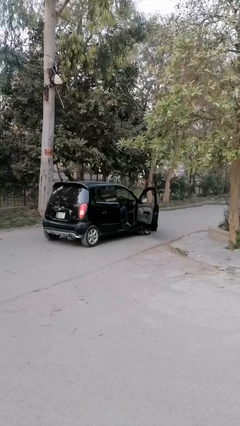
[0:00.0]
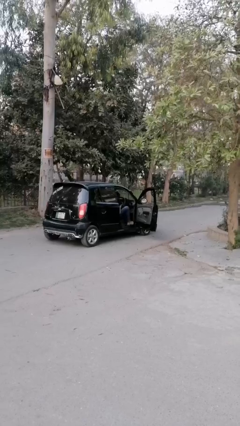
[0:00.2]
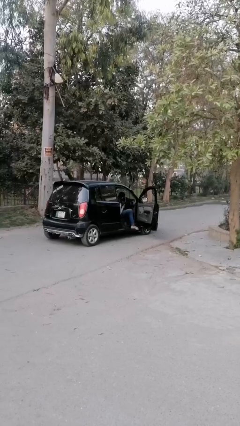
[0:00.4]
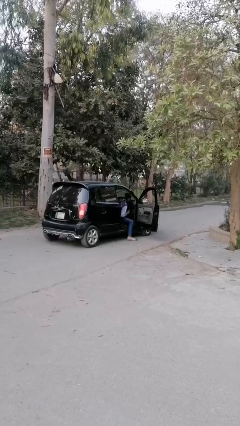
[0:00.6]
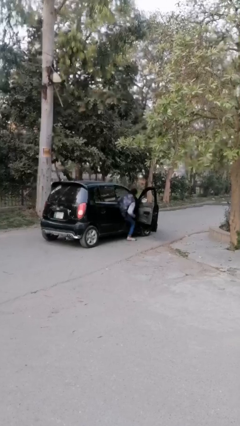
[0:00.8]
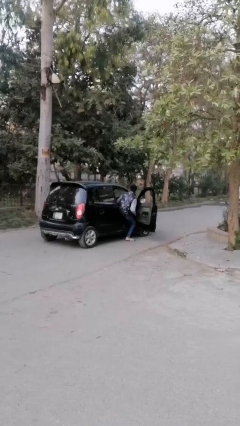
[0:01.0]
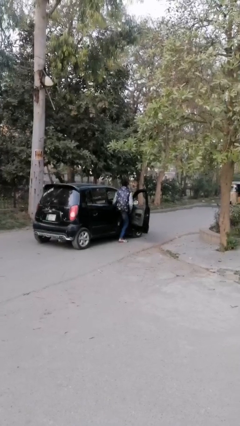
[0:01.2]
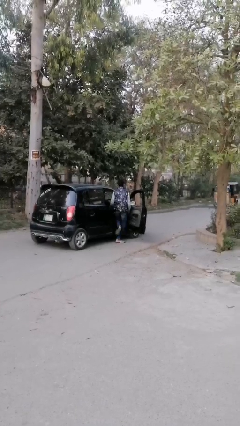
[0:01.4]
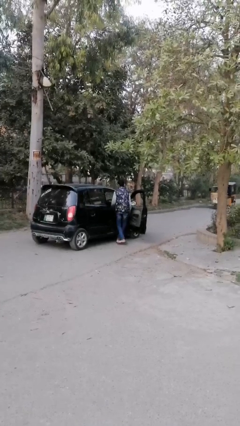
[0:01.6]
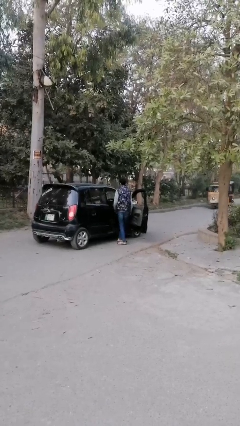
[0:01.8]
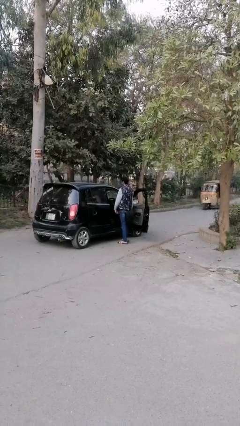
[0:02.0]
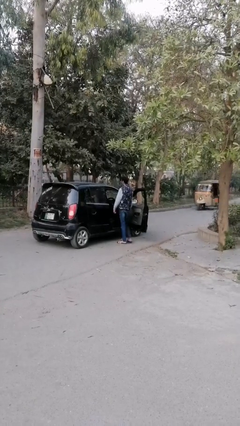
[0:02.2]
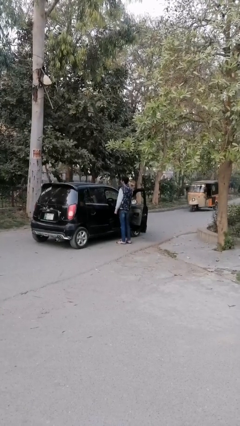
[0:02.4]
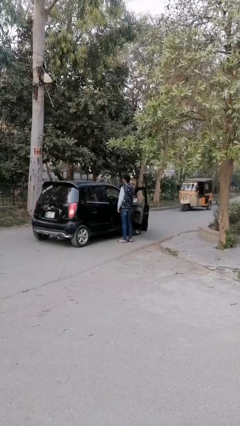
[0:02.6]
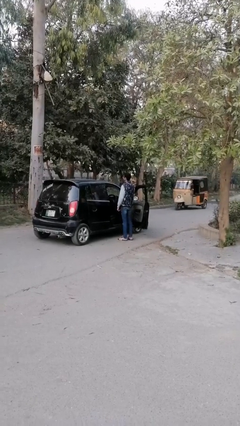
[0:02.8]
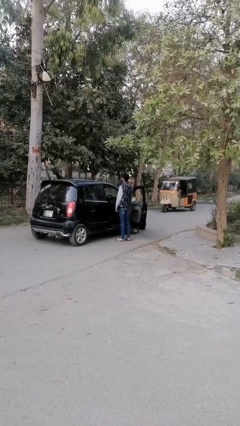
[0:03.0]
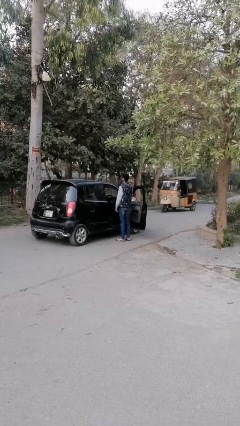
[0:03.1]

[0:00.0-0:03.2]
person exits car

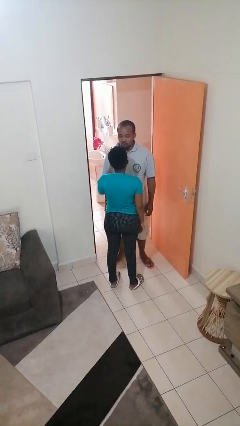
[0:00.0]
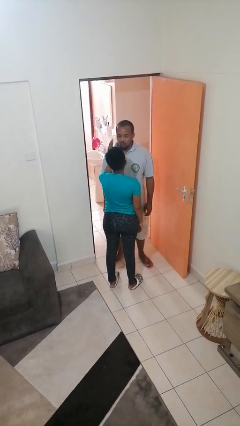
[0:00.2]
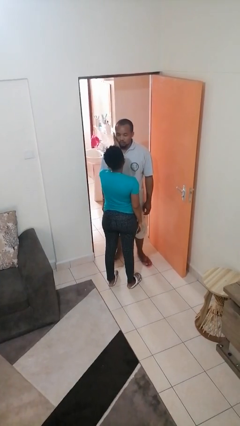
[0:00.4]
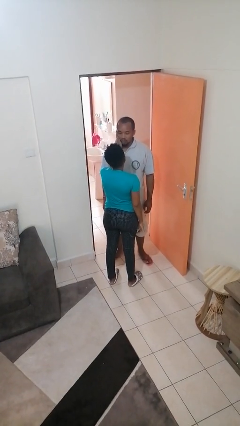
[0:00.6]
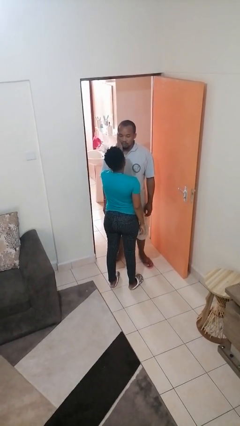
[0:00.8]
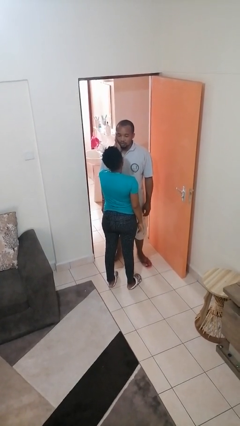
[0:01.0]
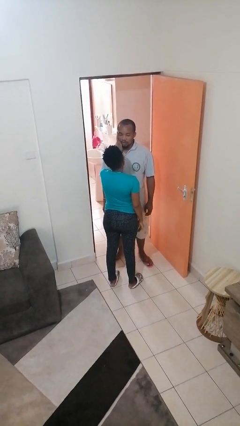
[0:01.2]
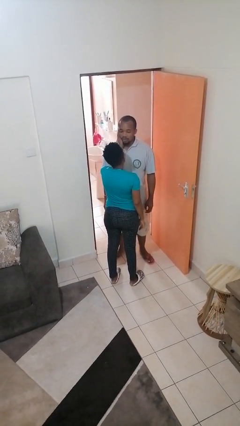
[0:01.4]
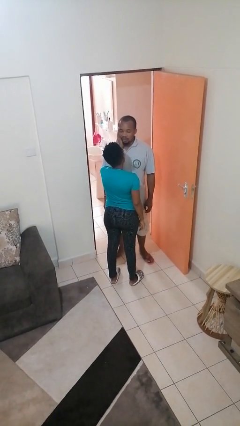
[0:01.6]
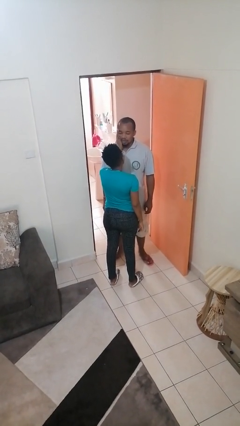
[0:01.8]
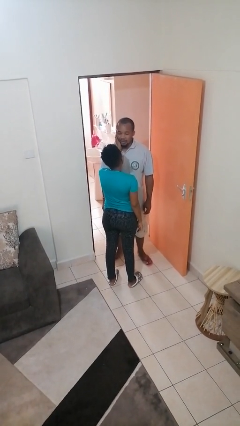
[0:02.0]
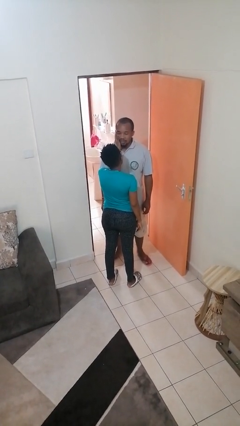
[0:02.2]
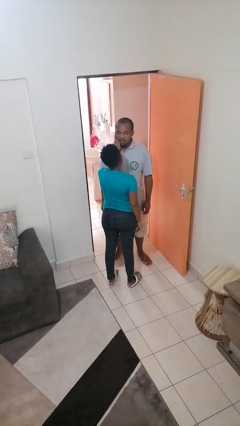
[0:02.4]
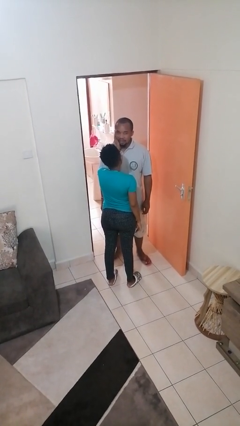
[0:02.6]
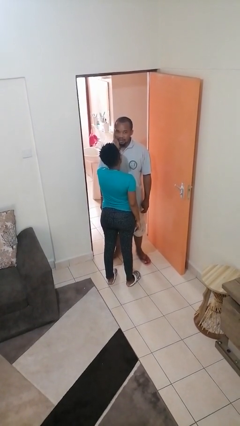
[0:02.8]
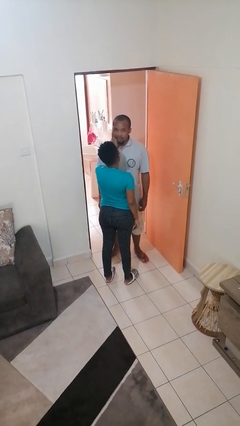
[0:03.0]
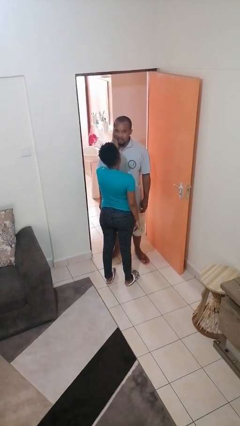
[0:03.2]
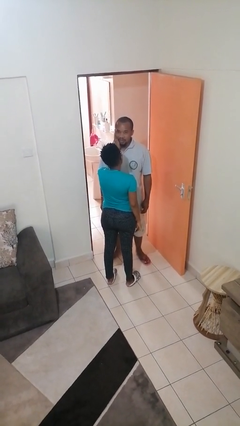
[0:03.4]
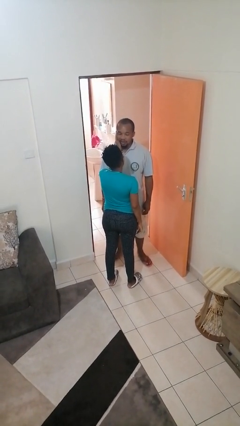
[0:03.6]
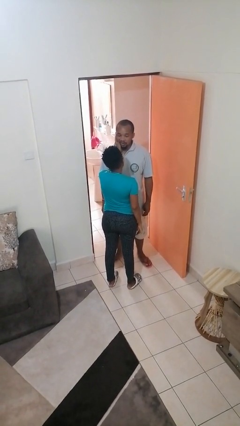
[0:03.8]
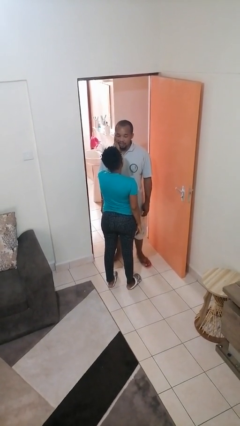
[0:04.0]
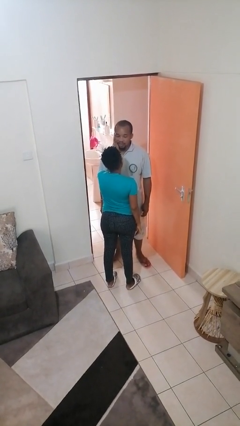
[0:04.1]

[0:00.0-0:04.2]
person touches face of person

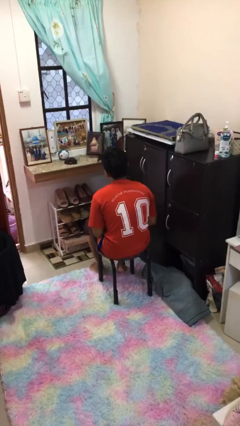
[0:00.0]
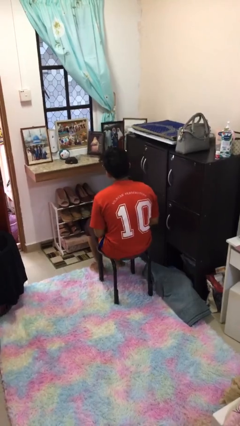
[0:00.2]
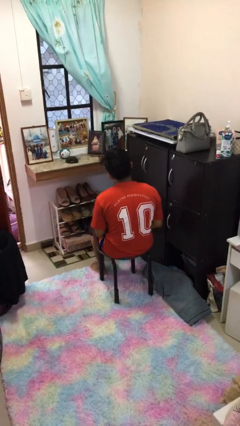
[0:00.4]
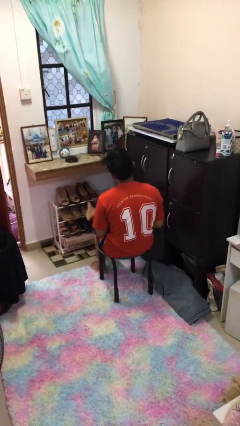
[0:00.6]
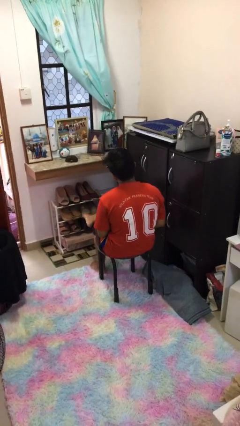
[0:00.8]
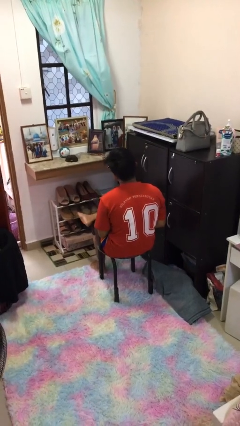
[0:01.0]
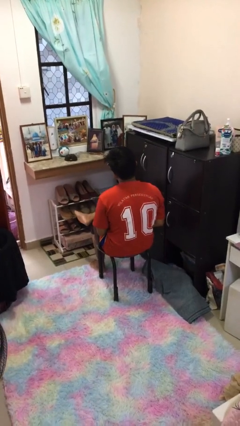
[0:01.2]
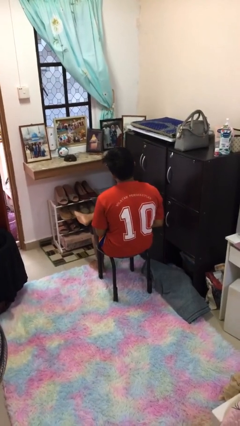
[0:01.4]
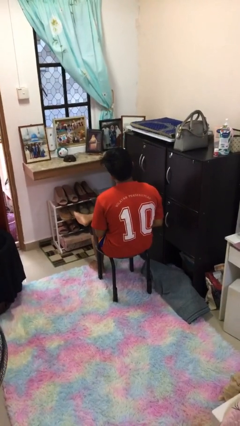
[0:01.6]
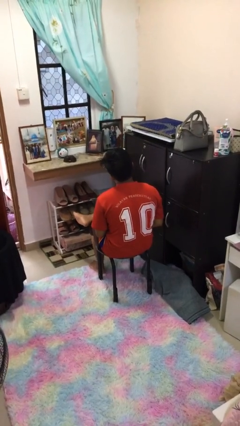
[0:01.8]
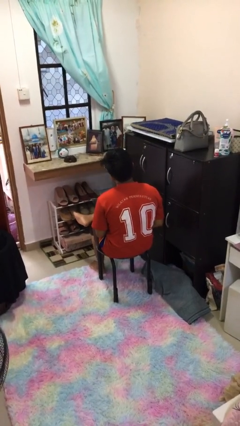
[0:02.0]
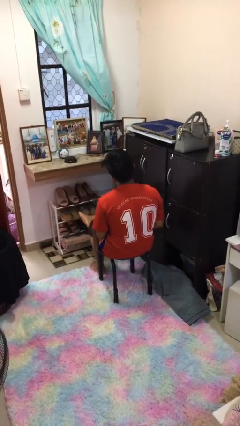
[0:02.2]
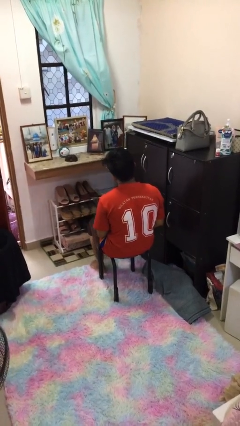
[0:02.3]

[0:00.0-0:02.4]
person crosses legs

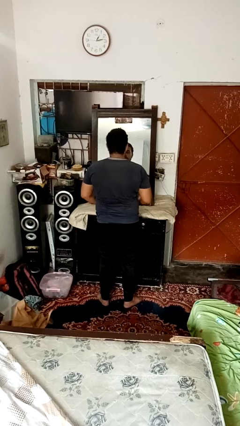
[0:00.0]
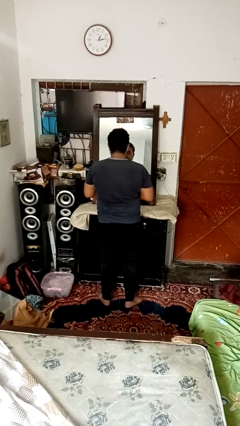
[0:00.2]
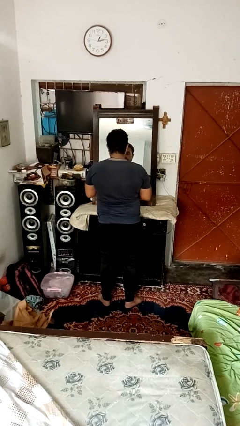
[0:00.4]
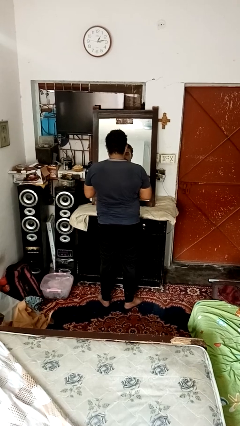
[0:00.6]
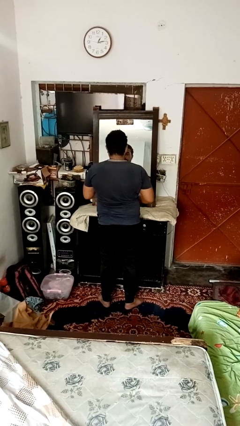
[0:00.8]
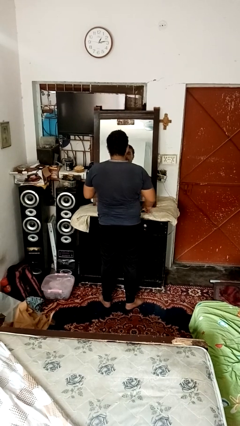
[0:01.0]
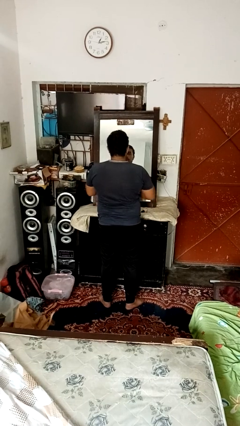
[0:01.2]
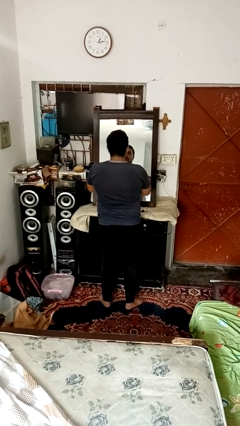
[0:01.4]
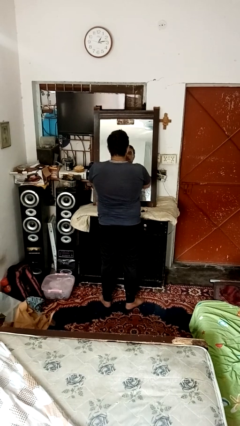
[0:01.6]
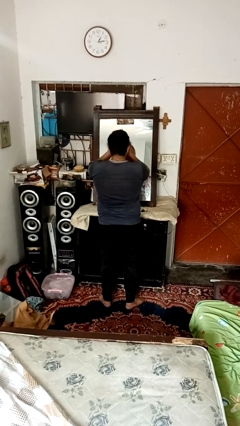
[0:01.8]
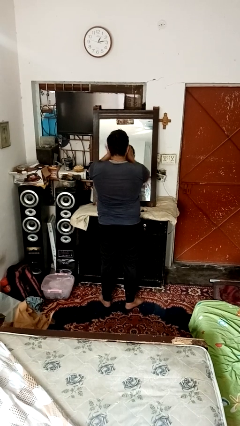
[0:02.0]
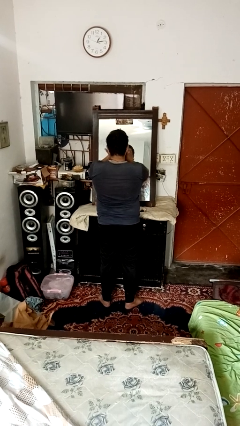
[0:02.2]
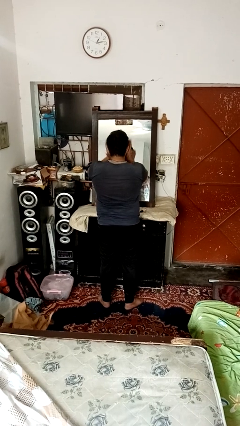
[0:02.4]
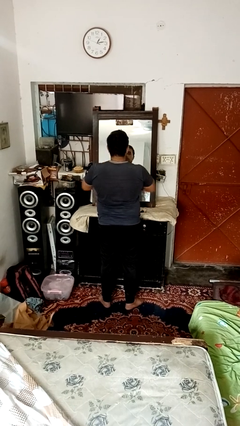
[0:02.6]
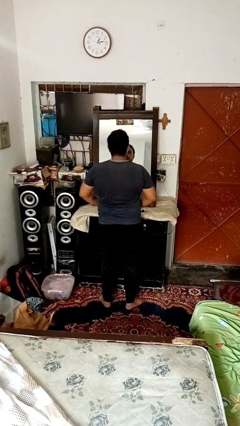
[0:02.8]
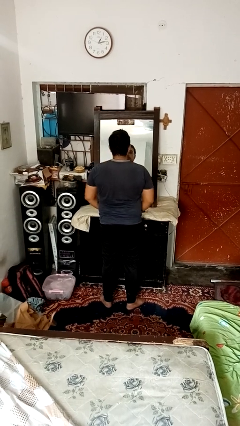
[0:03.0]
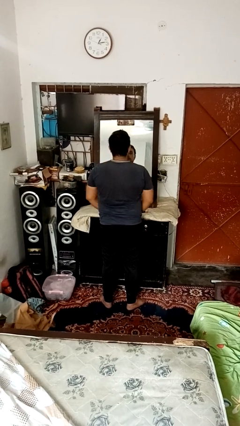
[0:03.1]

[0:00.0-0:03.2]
person applies foundation makeup

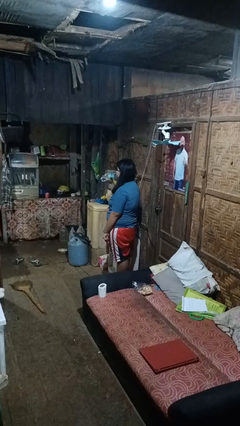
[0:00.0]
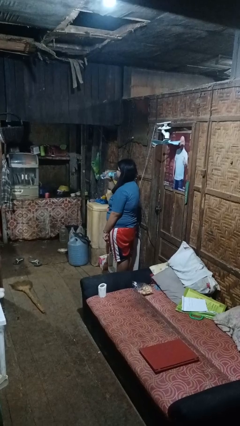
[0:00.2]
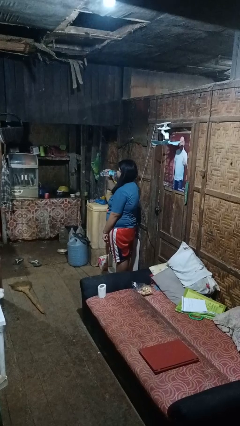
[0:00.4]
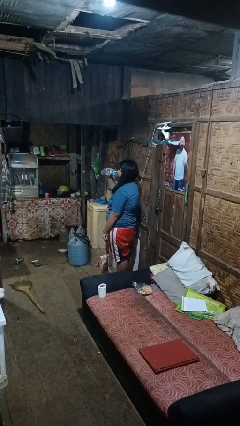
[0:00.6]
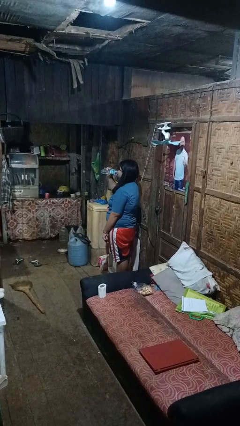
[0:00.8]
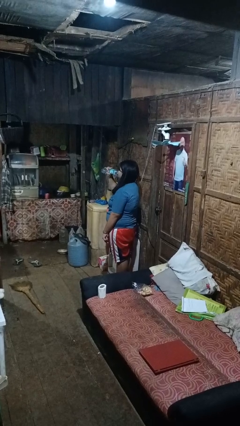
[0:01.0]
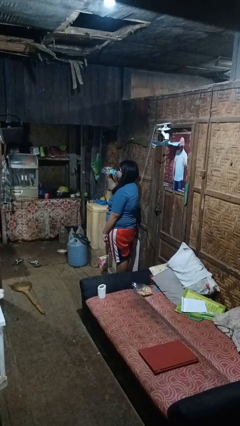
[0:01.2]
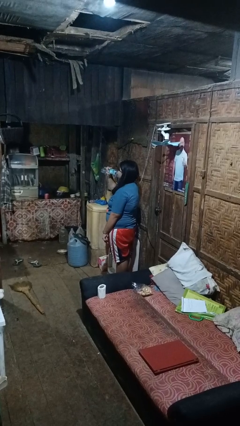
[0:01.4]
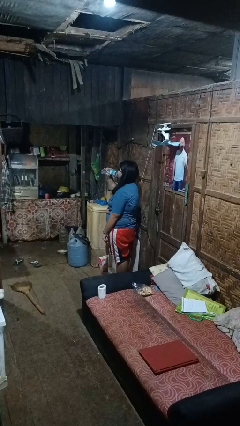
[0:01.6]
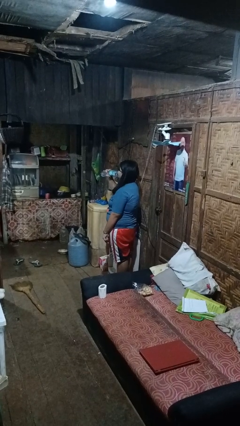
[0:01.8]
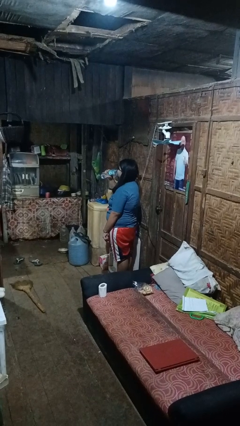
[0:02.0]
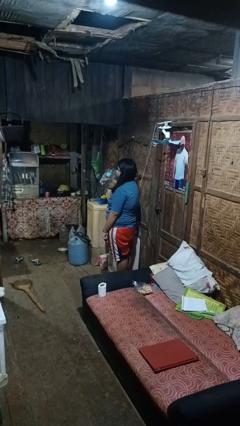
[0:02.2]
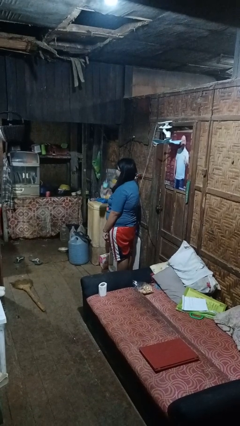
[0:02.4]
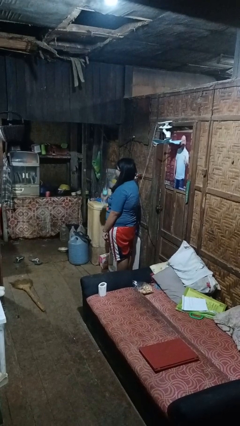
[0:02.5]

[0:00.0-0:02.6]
person drinks from bottle

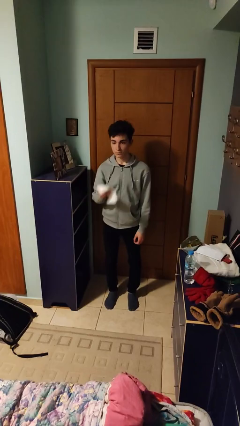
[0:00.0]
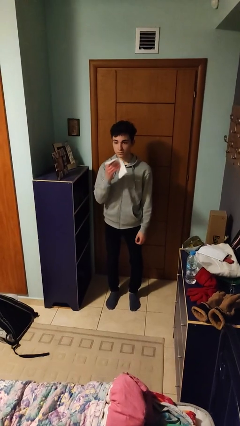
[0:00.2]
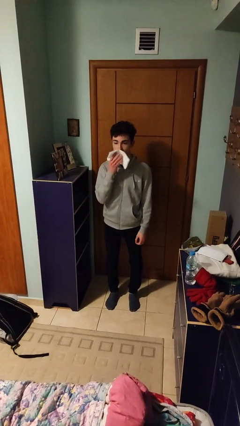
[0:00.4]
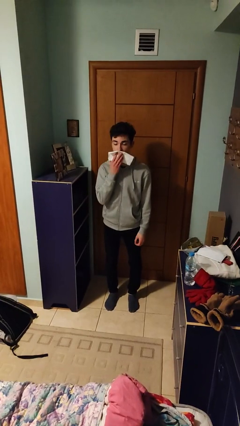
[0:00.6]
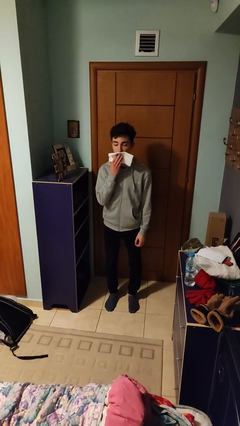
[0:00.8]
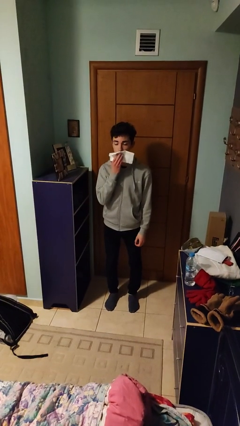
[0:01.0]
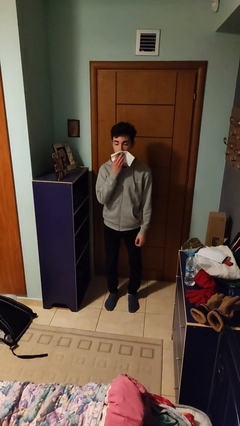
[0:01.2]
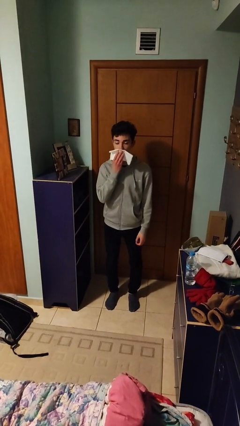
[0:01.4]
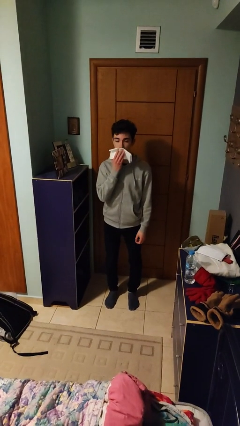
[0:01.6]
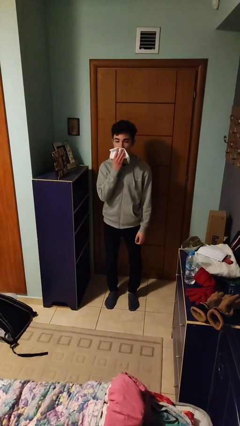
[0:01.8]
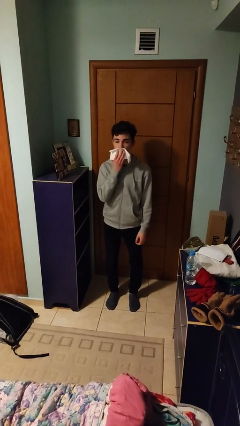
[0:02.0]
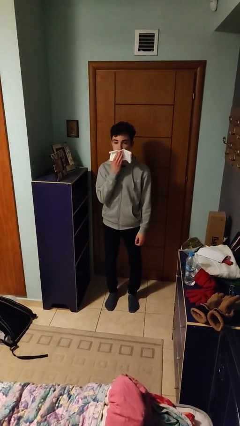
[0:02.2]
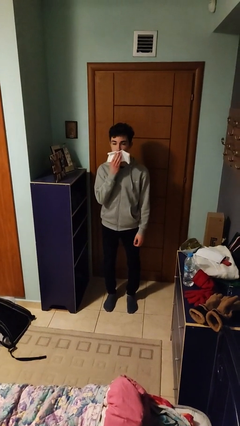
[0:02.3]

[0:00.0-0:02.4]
person wipes mouth with napkin
